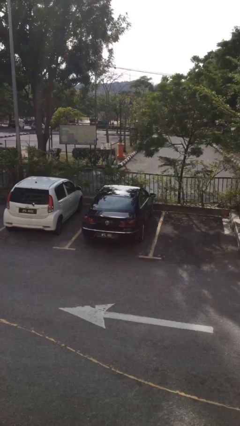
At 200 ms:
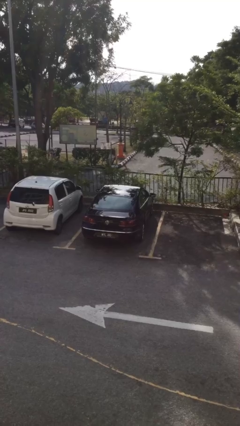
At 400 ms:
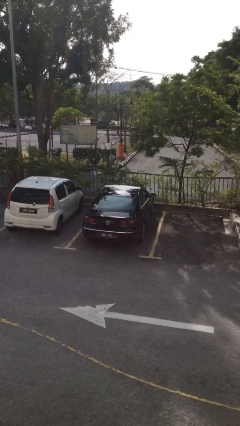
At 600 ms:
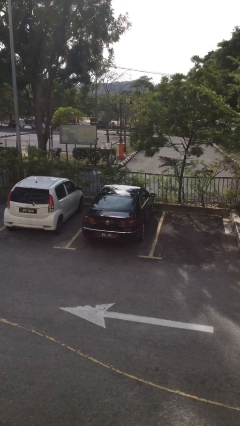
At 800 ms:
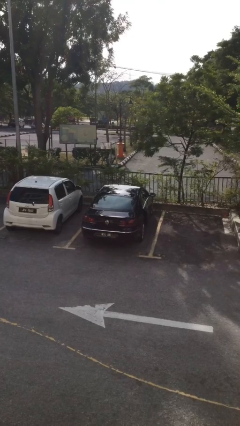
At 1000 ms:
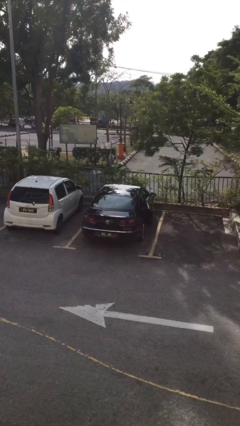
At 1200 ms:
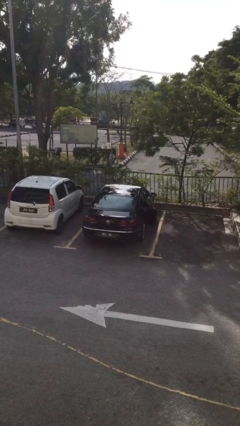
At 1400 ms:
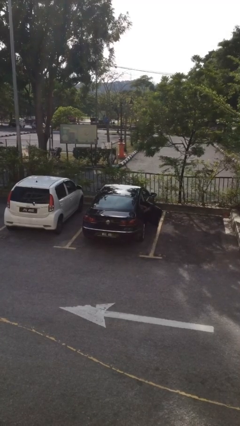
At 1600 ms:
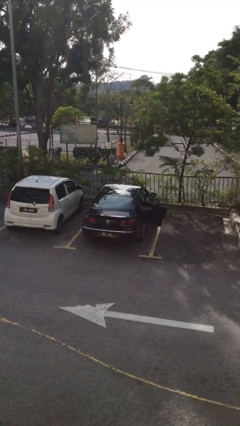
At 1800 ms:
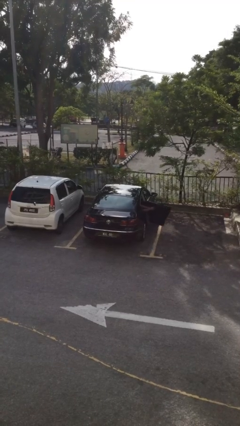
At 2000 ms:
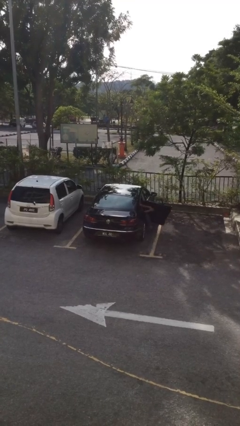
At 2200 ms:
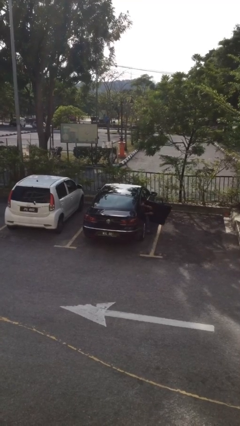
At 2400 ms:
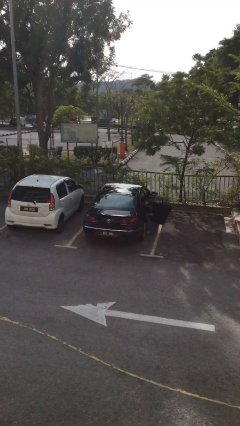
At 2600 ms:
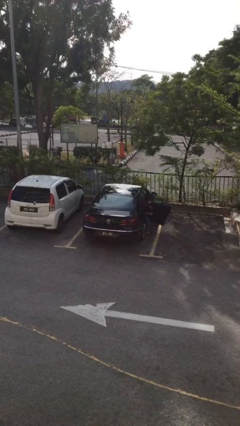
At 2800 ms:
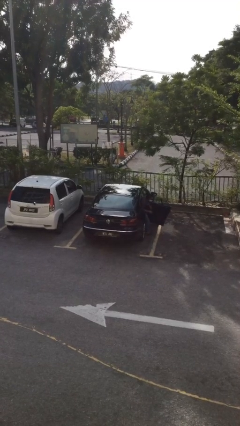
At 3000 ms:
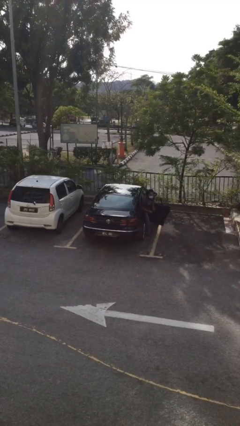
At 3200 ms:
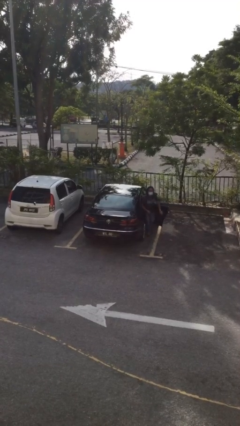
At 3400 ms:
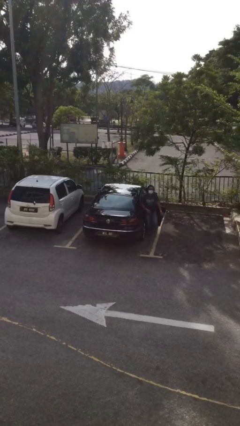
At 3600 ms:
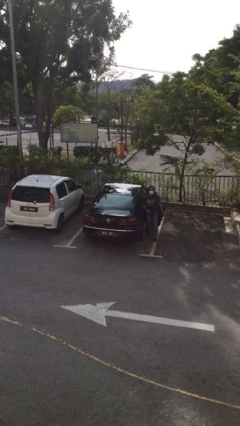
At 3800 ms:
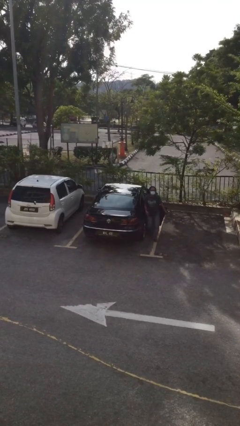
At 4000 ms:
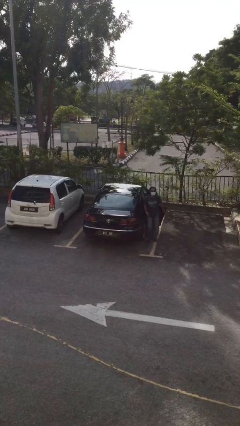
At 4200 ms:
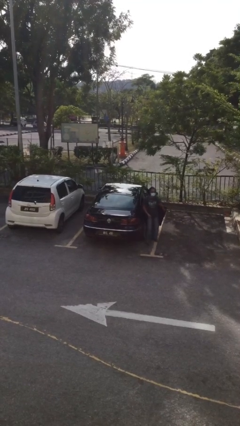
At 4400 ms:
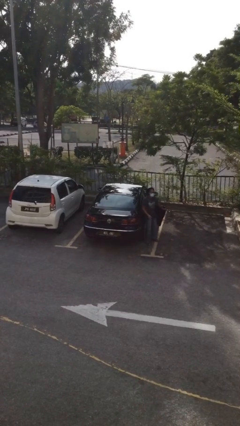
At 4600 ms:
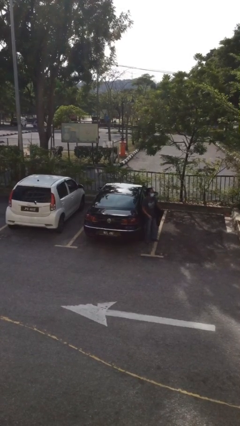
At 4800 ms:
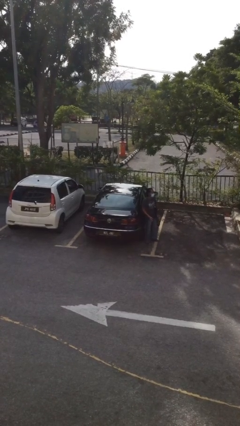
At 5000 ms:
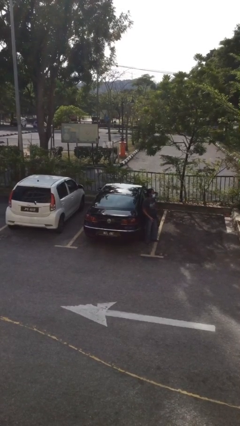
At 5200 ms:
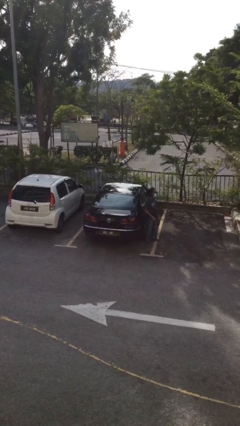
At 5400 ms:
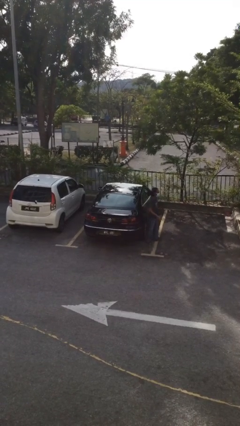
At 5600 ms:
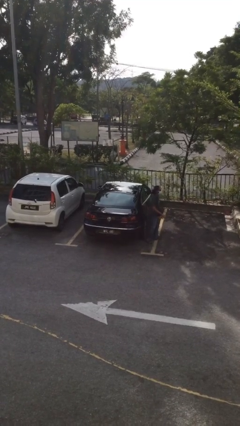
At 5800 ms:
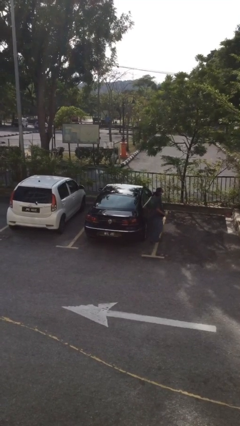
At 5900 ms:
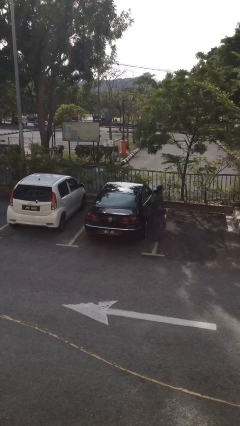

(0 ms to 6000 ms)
car drops off person

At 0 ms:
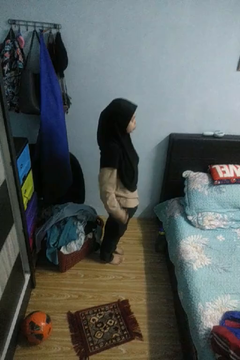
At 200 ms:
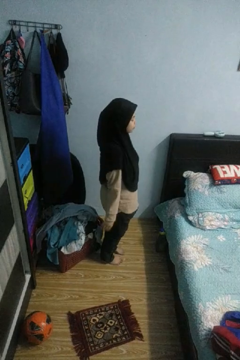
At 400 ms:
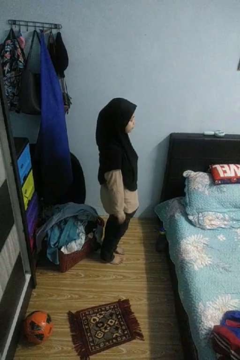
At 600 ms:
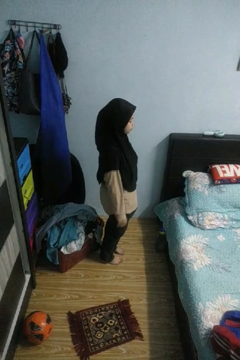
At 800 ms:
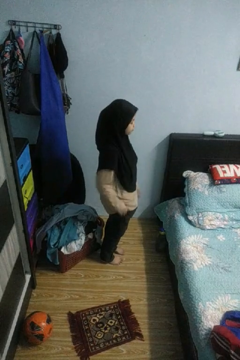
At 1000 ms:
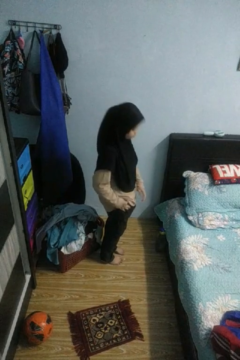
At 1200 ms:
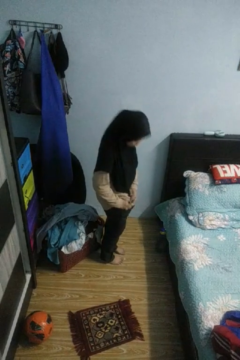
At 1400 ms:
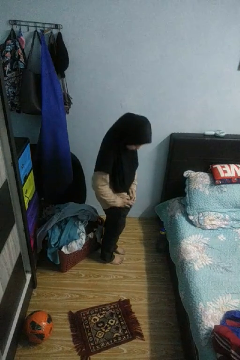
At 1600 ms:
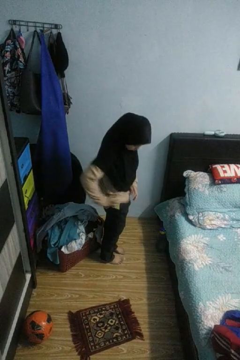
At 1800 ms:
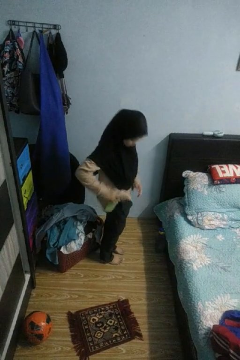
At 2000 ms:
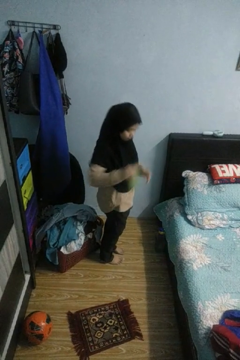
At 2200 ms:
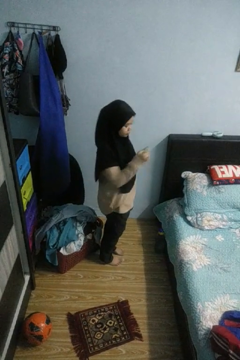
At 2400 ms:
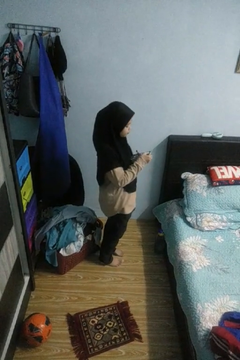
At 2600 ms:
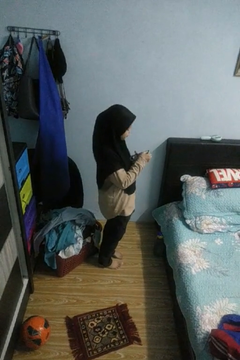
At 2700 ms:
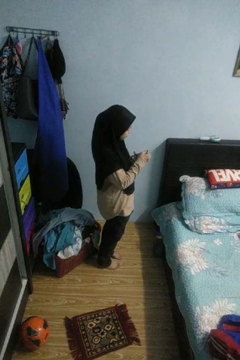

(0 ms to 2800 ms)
person takes phone from pocket

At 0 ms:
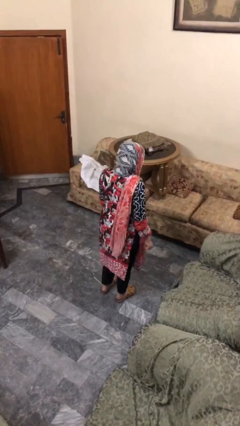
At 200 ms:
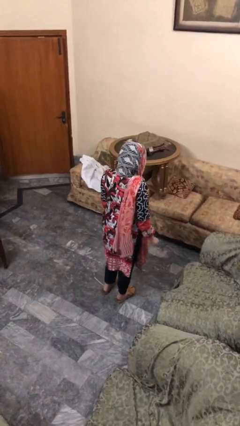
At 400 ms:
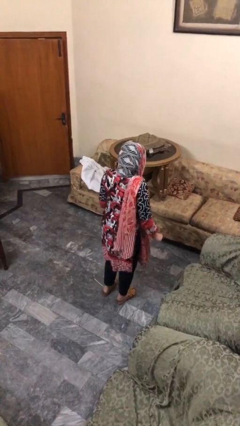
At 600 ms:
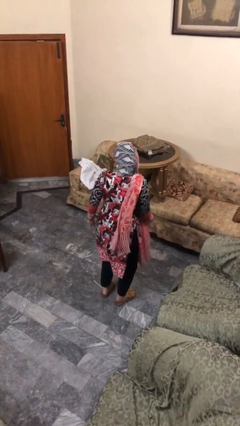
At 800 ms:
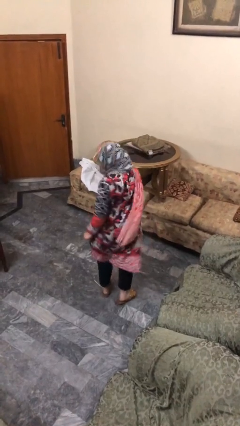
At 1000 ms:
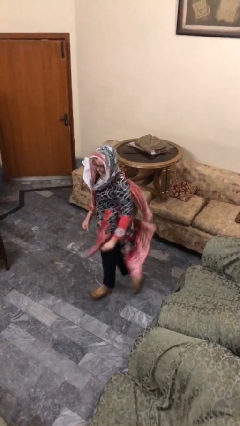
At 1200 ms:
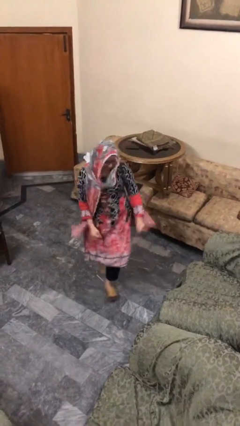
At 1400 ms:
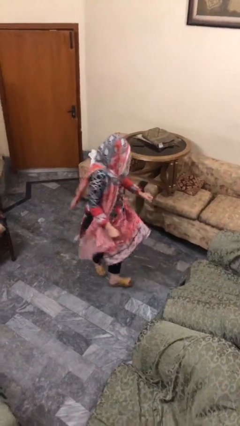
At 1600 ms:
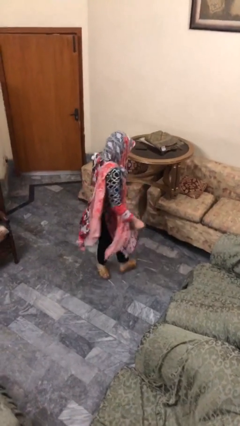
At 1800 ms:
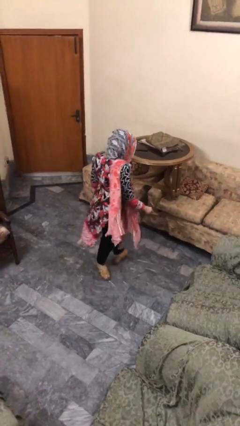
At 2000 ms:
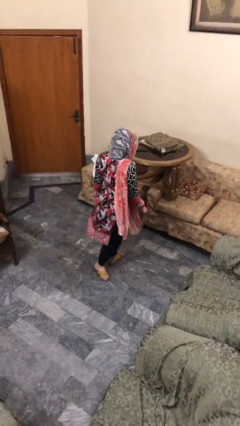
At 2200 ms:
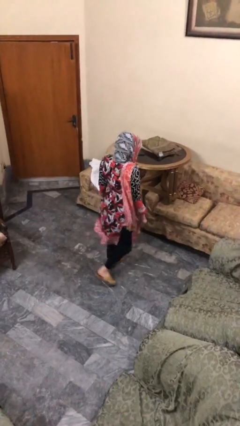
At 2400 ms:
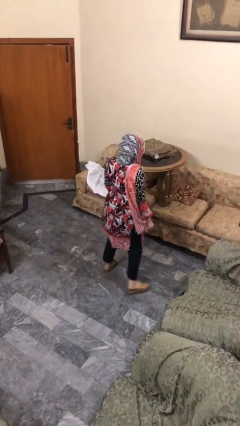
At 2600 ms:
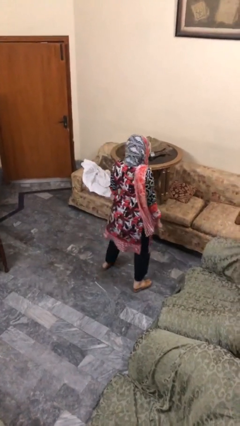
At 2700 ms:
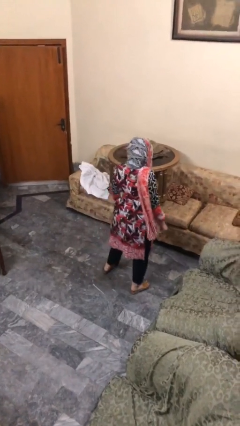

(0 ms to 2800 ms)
person twirls

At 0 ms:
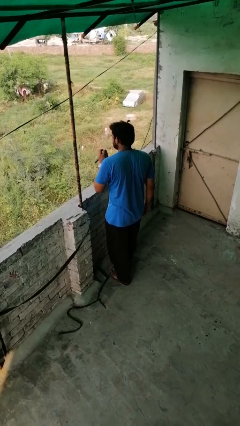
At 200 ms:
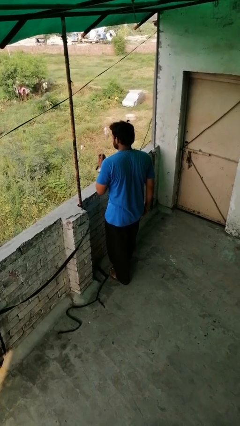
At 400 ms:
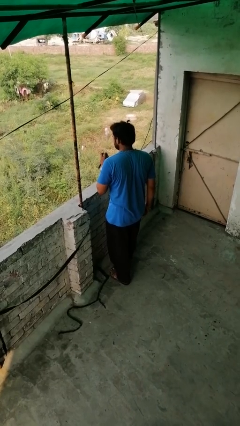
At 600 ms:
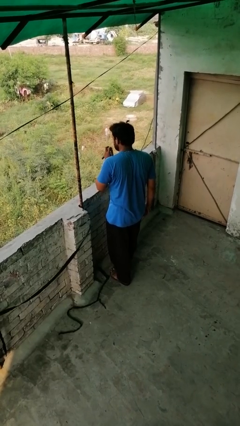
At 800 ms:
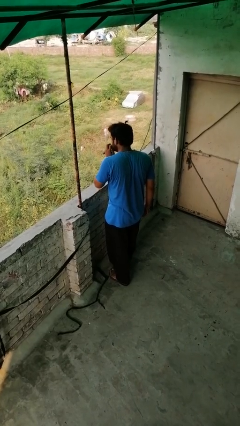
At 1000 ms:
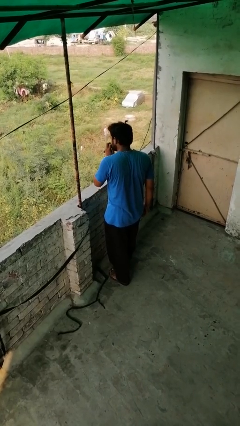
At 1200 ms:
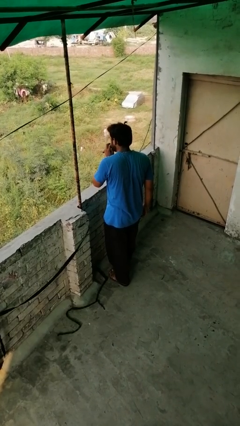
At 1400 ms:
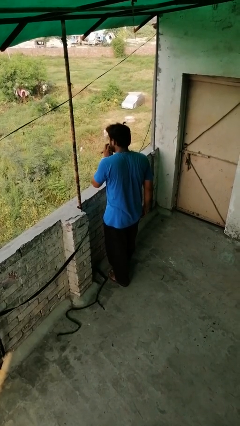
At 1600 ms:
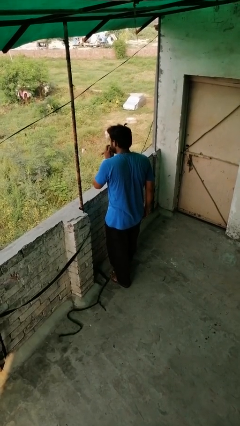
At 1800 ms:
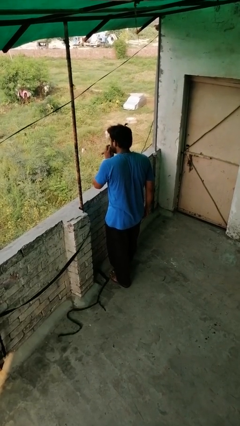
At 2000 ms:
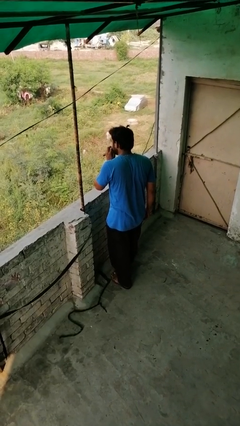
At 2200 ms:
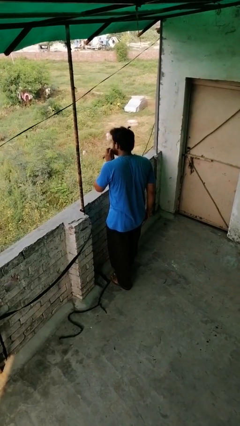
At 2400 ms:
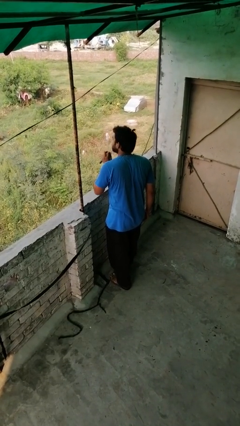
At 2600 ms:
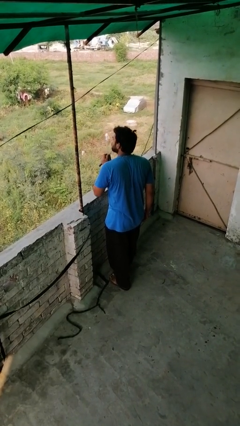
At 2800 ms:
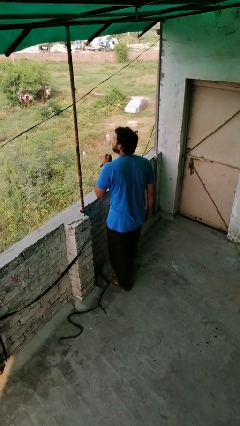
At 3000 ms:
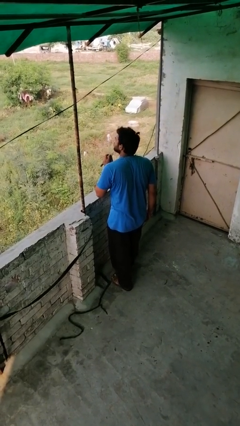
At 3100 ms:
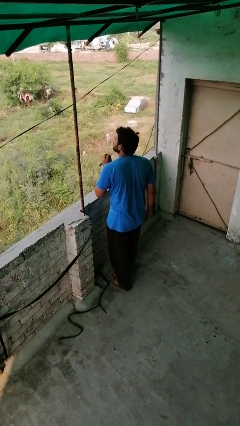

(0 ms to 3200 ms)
person vapes

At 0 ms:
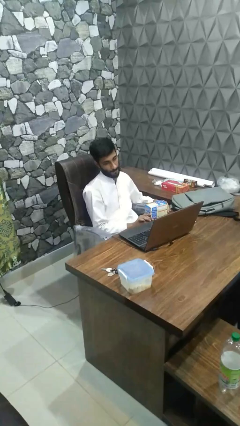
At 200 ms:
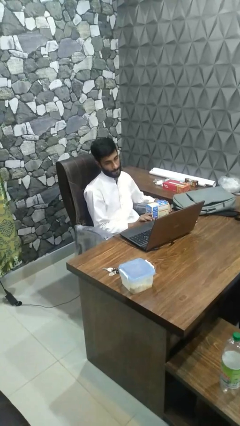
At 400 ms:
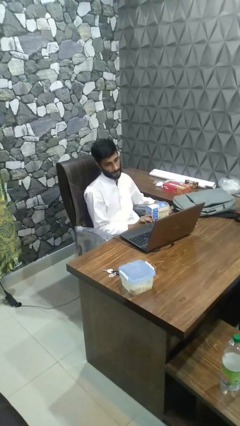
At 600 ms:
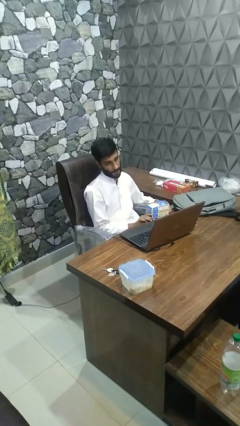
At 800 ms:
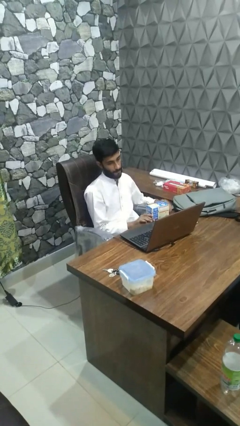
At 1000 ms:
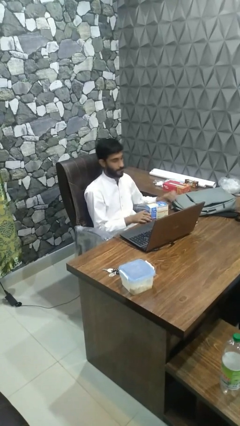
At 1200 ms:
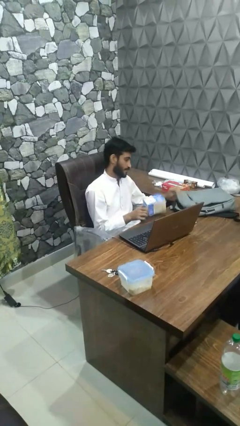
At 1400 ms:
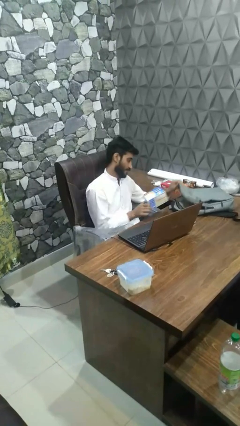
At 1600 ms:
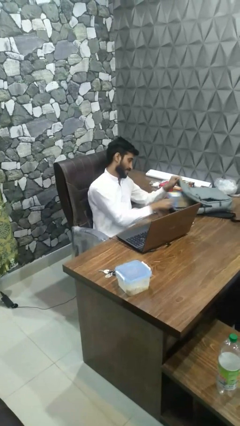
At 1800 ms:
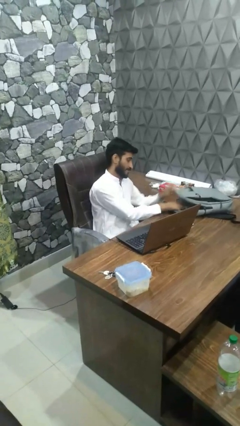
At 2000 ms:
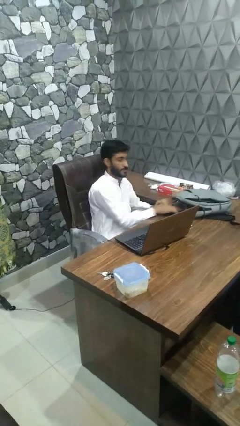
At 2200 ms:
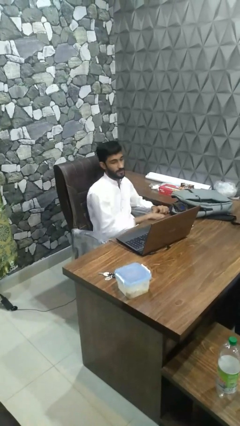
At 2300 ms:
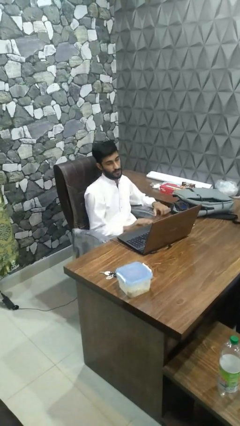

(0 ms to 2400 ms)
person puts object into bag

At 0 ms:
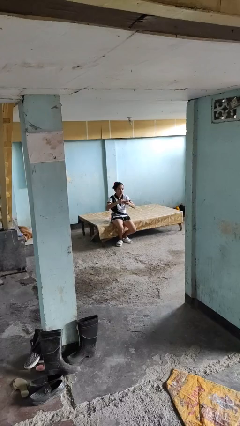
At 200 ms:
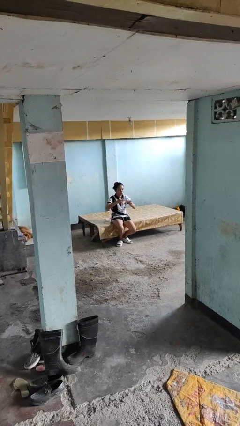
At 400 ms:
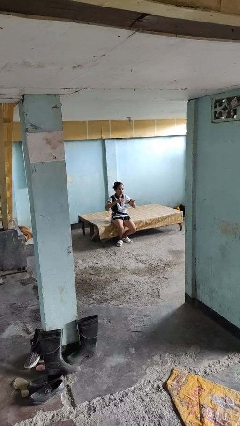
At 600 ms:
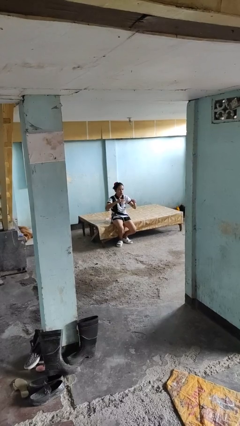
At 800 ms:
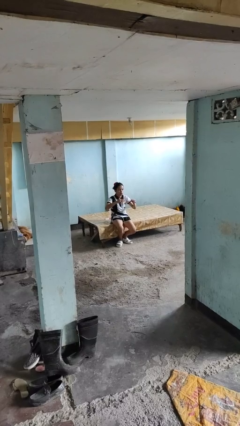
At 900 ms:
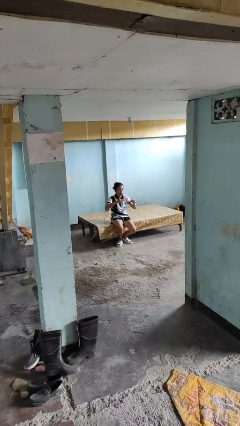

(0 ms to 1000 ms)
person takes off ring
